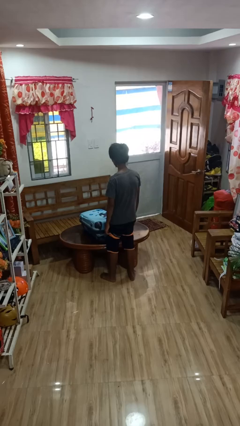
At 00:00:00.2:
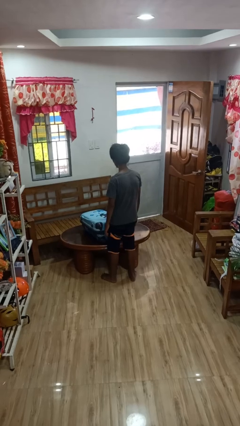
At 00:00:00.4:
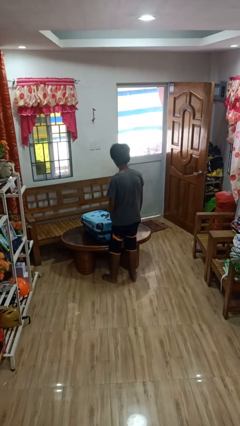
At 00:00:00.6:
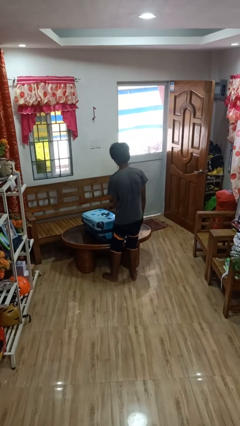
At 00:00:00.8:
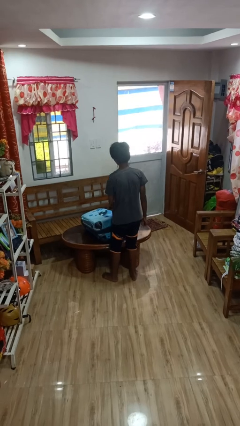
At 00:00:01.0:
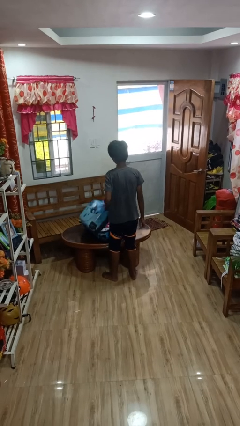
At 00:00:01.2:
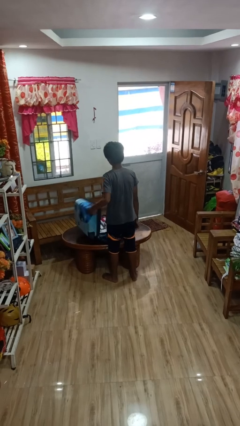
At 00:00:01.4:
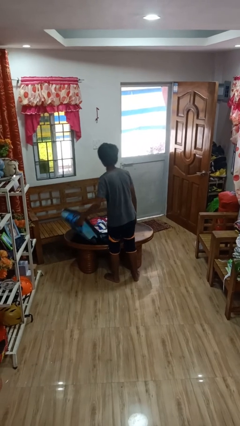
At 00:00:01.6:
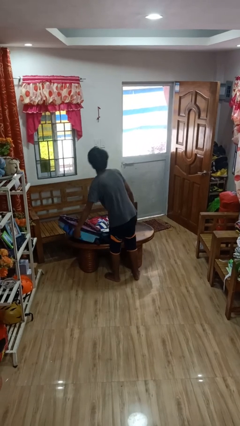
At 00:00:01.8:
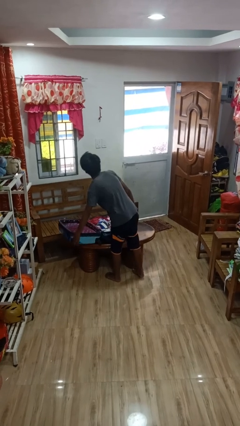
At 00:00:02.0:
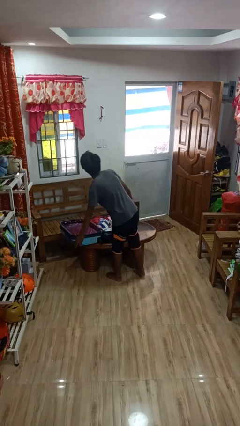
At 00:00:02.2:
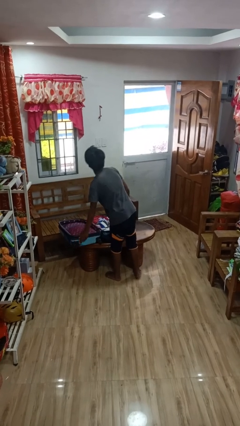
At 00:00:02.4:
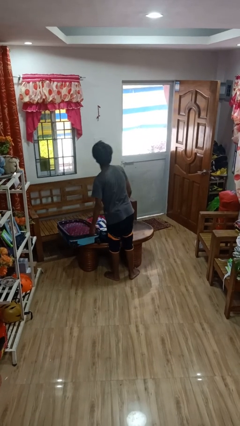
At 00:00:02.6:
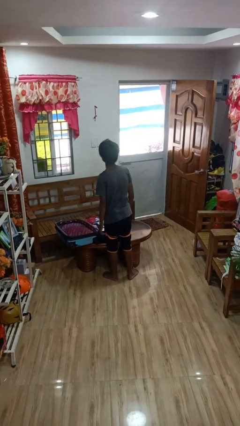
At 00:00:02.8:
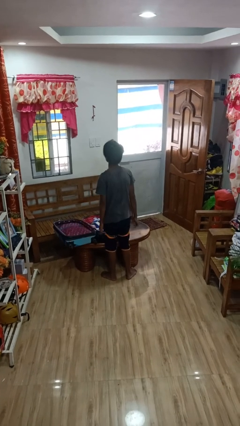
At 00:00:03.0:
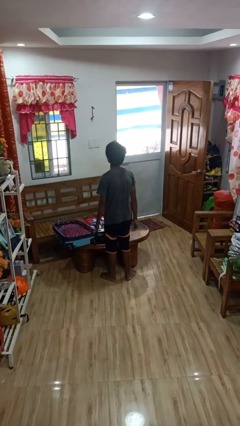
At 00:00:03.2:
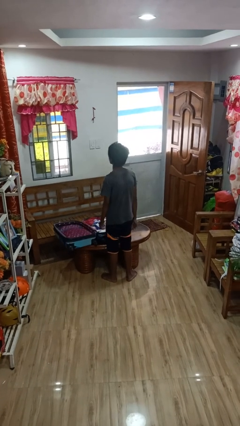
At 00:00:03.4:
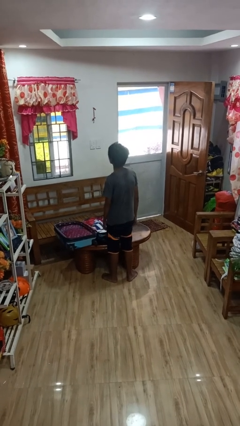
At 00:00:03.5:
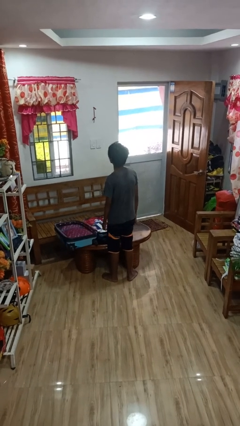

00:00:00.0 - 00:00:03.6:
person opens suitcase

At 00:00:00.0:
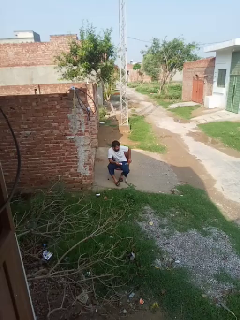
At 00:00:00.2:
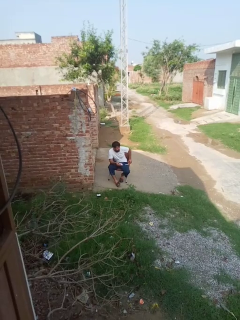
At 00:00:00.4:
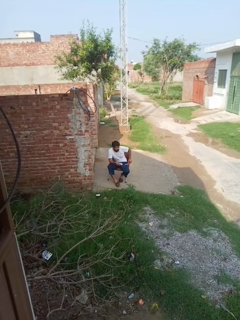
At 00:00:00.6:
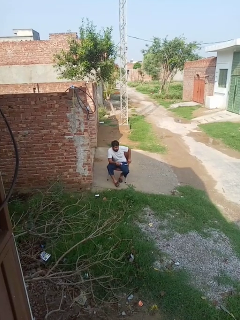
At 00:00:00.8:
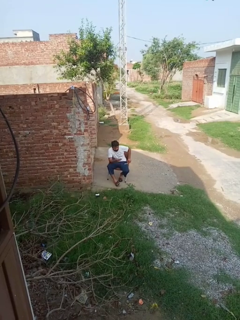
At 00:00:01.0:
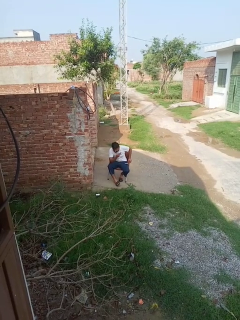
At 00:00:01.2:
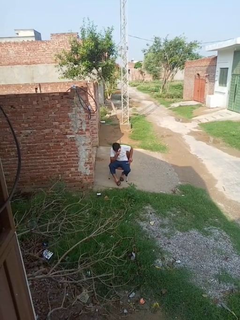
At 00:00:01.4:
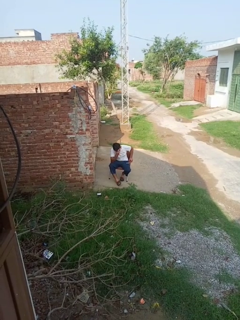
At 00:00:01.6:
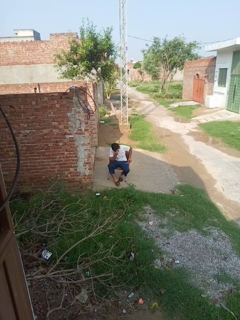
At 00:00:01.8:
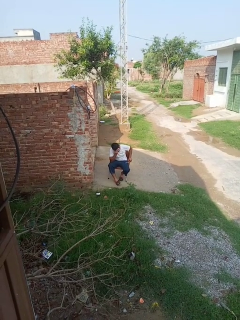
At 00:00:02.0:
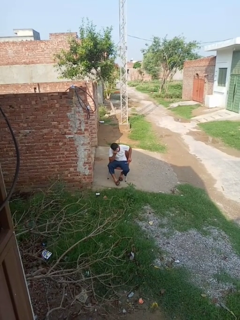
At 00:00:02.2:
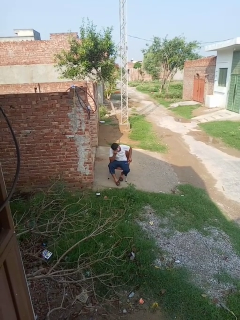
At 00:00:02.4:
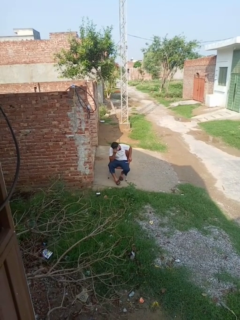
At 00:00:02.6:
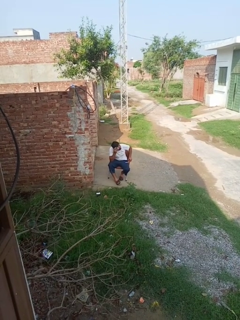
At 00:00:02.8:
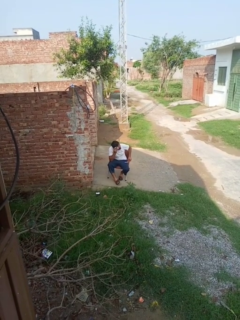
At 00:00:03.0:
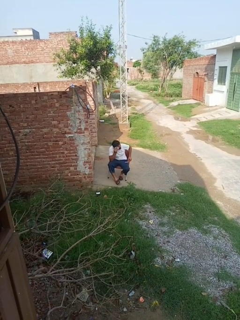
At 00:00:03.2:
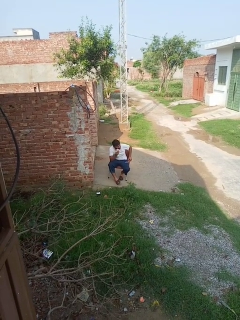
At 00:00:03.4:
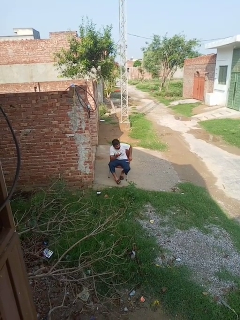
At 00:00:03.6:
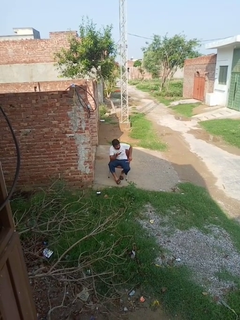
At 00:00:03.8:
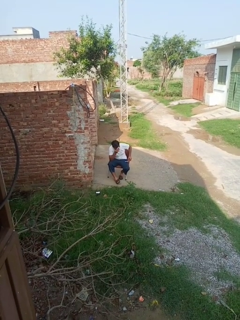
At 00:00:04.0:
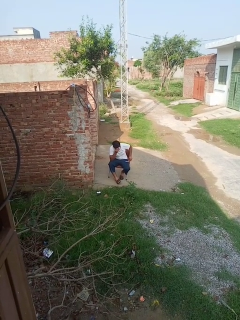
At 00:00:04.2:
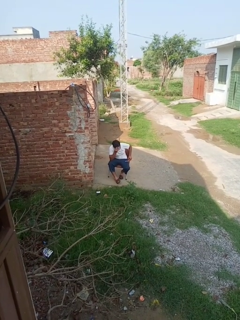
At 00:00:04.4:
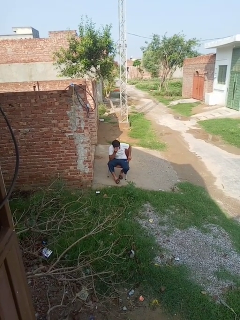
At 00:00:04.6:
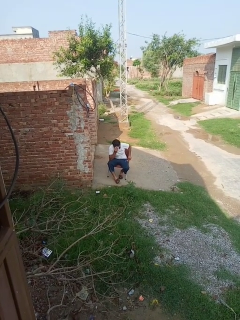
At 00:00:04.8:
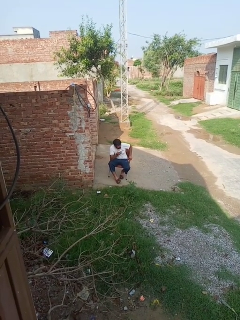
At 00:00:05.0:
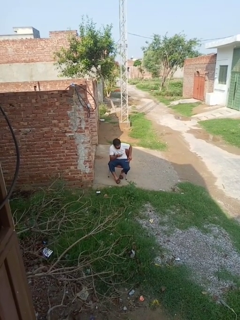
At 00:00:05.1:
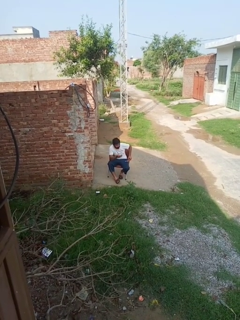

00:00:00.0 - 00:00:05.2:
person wipes mouth with napkin

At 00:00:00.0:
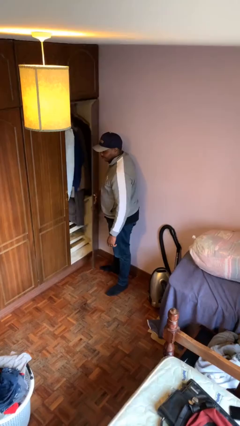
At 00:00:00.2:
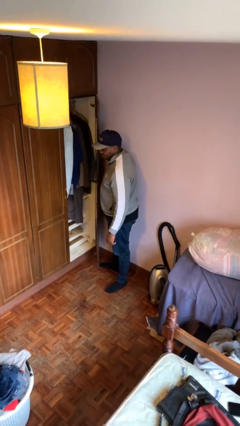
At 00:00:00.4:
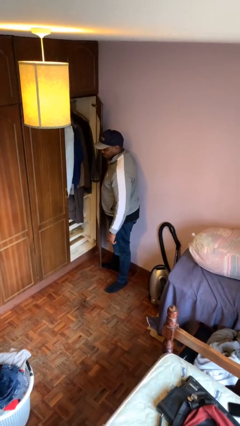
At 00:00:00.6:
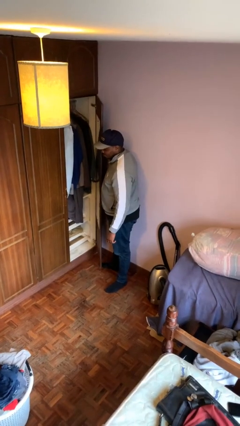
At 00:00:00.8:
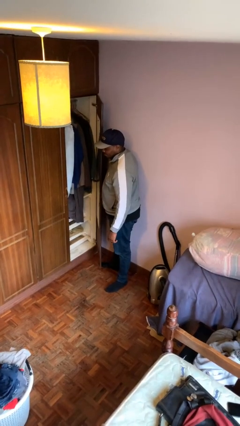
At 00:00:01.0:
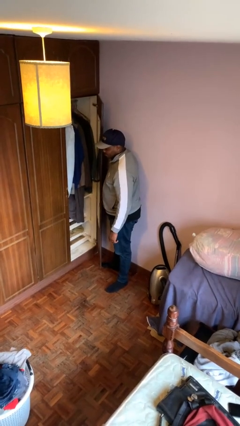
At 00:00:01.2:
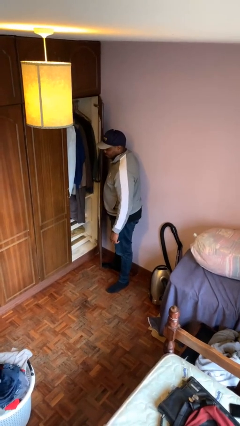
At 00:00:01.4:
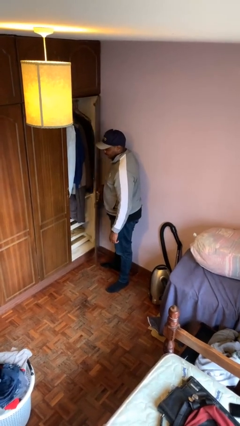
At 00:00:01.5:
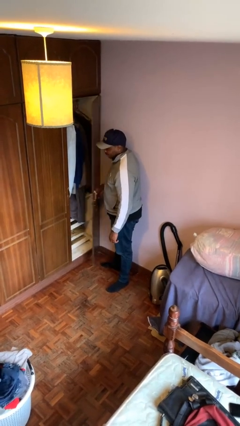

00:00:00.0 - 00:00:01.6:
person opens closet door

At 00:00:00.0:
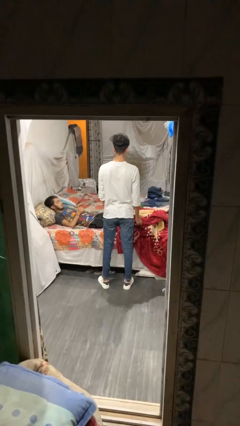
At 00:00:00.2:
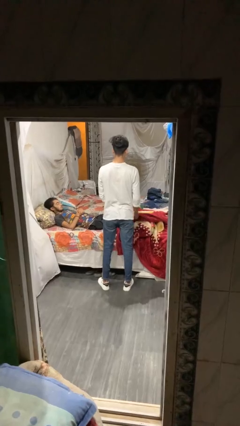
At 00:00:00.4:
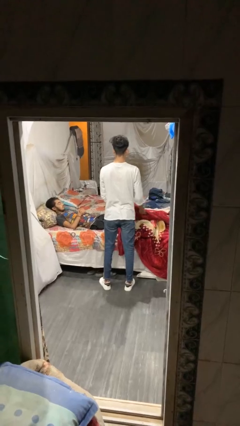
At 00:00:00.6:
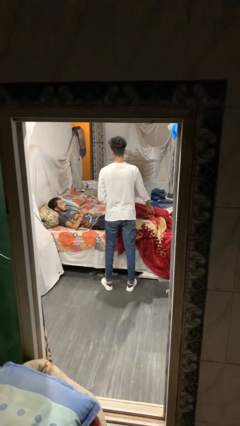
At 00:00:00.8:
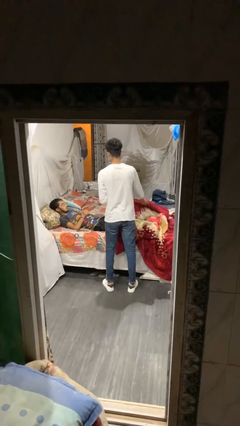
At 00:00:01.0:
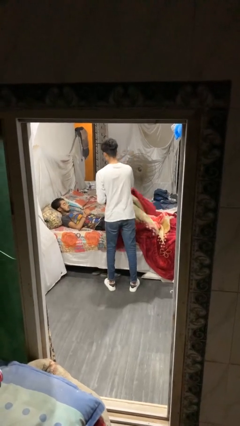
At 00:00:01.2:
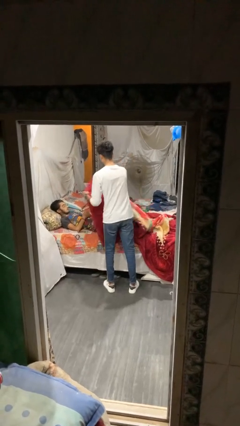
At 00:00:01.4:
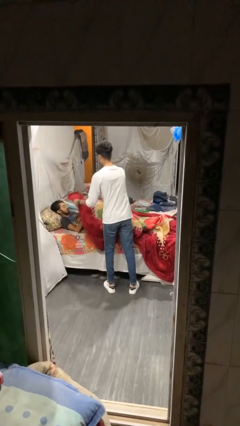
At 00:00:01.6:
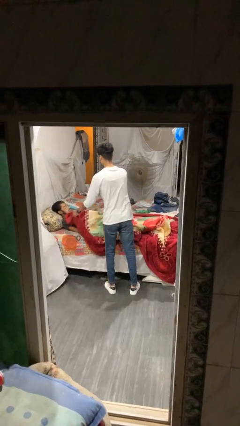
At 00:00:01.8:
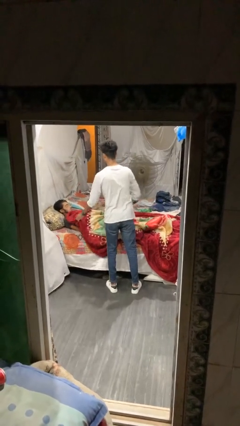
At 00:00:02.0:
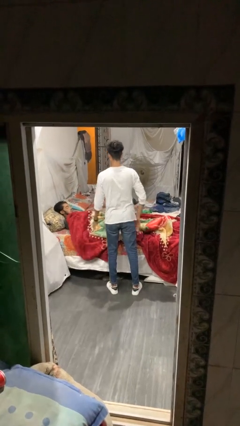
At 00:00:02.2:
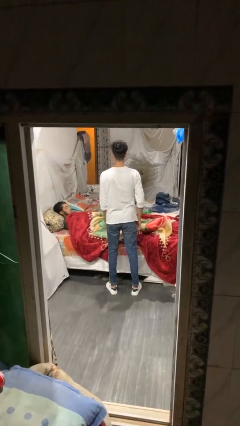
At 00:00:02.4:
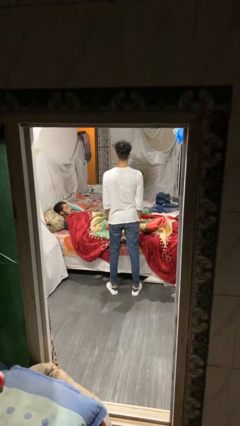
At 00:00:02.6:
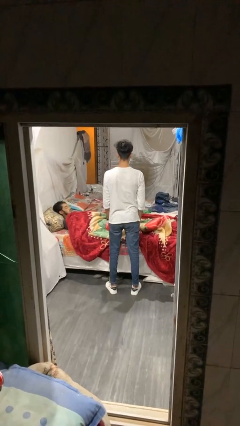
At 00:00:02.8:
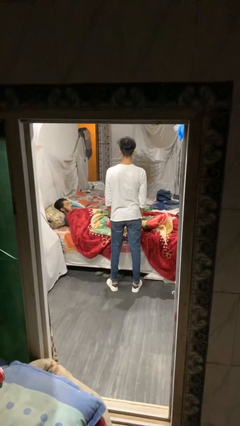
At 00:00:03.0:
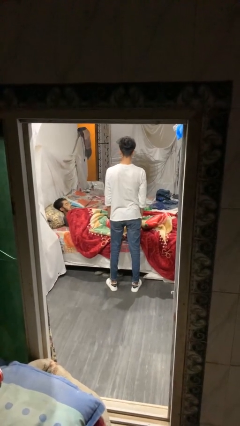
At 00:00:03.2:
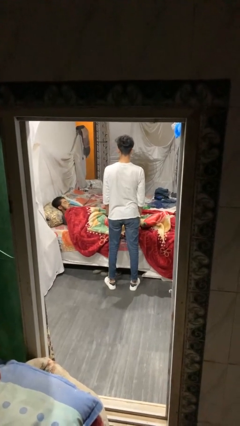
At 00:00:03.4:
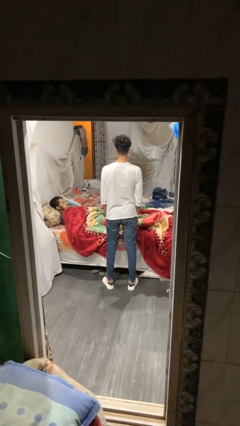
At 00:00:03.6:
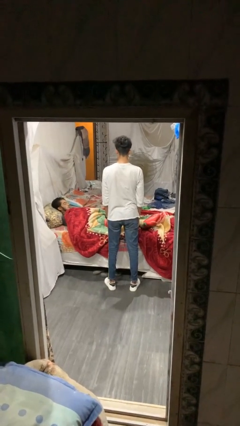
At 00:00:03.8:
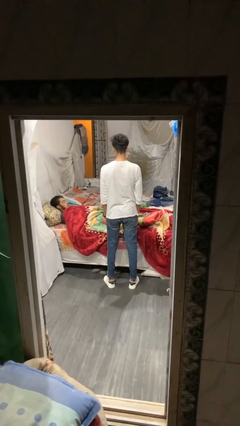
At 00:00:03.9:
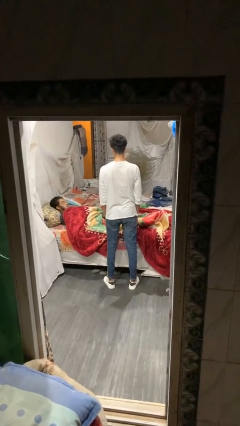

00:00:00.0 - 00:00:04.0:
person covers friend with blanket

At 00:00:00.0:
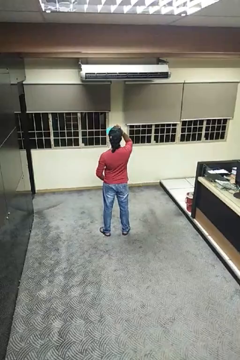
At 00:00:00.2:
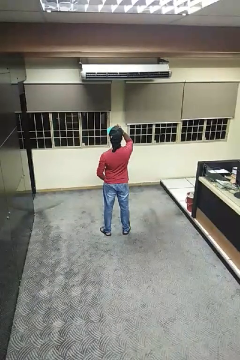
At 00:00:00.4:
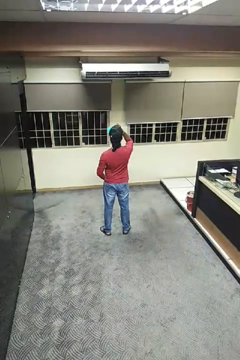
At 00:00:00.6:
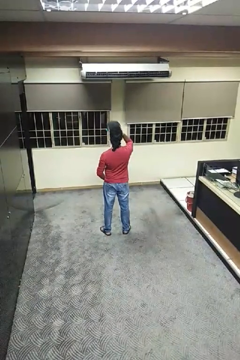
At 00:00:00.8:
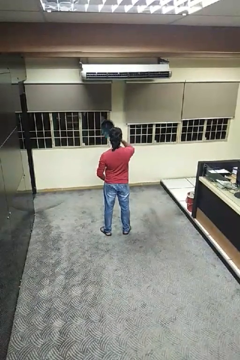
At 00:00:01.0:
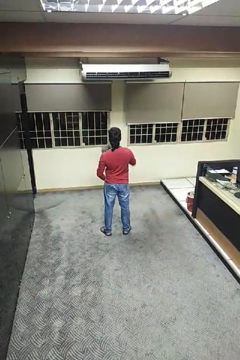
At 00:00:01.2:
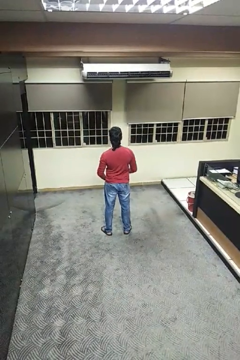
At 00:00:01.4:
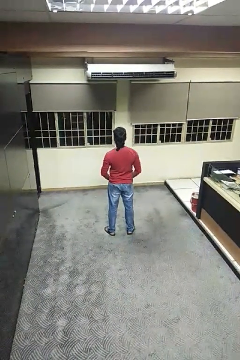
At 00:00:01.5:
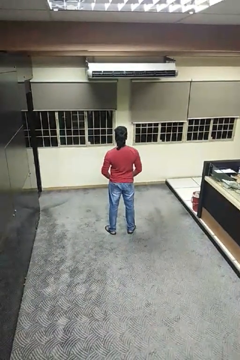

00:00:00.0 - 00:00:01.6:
person takes off hat

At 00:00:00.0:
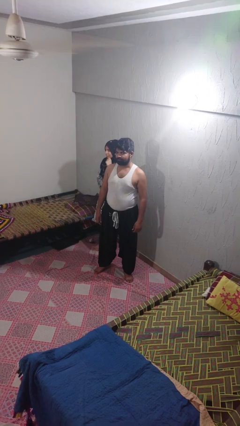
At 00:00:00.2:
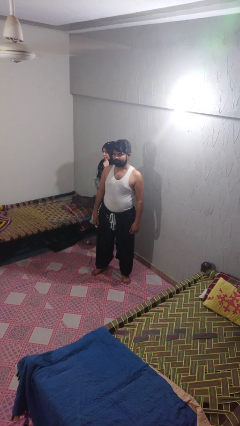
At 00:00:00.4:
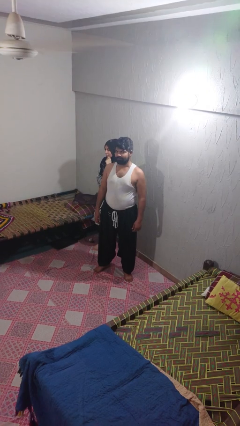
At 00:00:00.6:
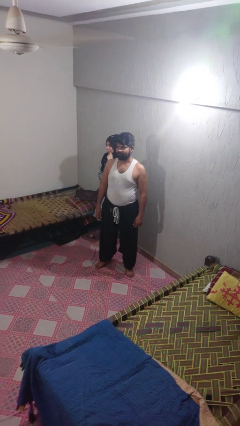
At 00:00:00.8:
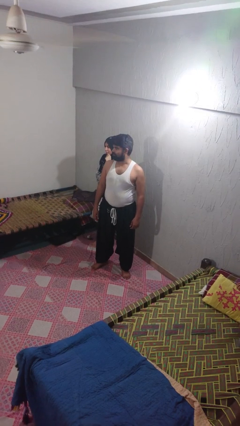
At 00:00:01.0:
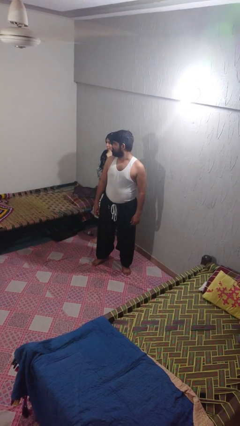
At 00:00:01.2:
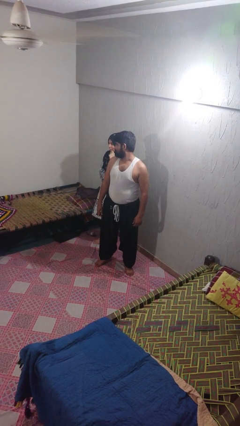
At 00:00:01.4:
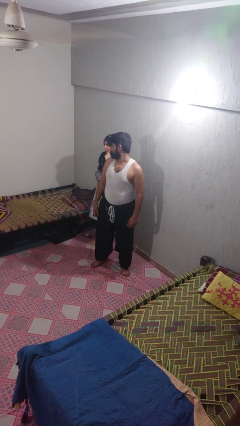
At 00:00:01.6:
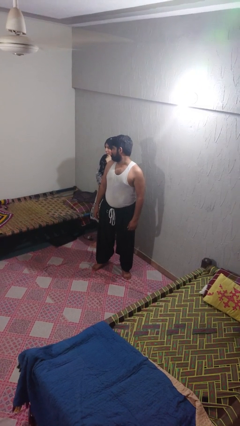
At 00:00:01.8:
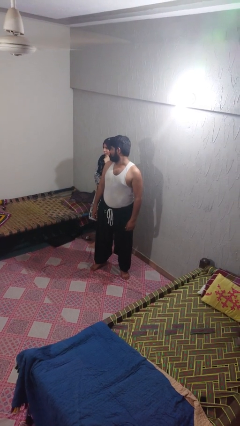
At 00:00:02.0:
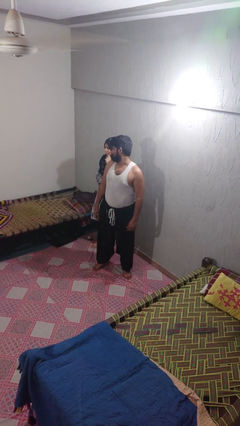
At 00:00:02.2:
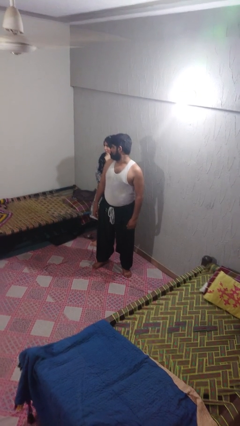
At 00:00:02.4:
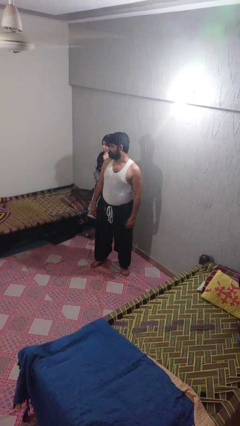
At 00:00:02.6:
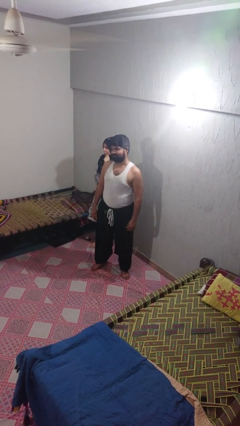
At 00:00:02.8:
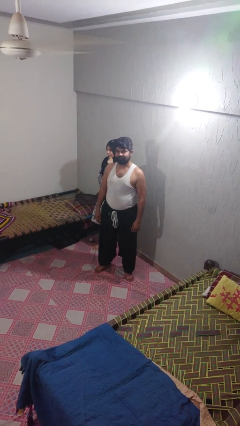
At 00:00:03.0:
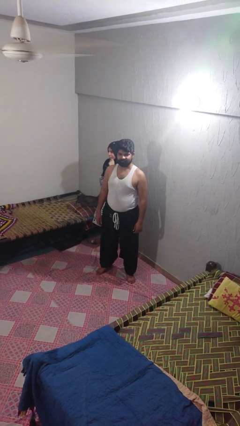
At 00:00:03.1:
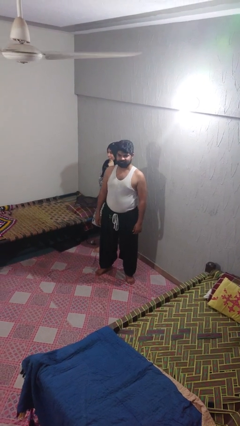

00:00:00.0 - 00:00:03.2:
person looks over shoulder
